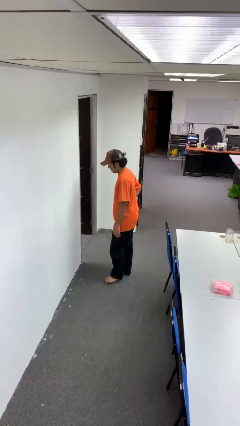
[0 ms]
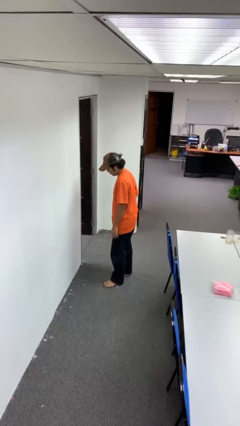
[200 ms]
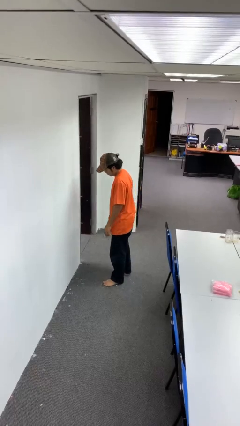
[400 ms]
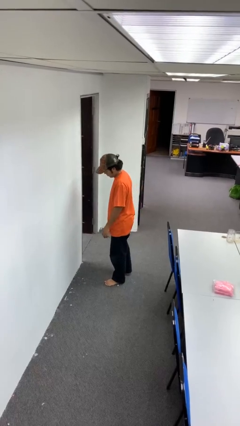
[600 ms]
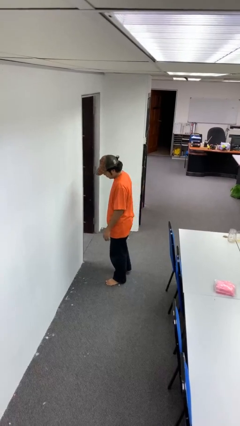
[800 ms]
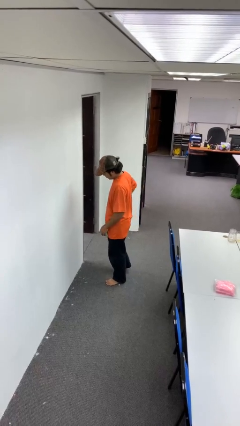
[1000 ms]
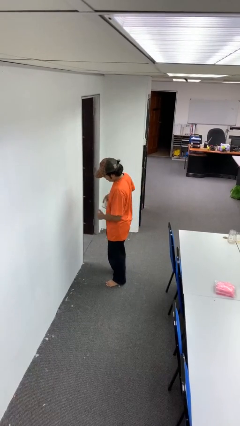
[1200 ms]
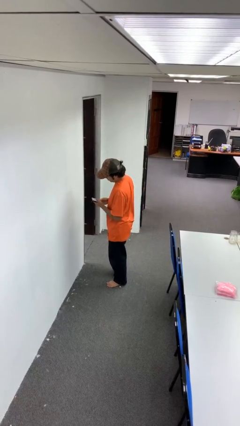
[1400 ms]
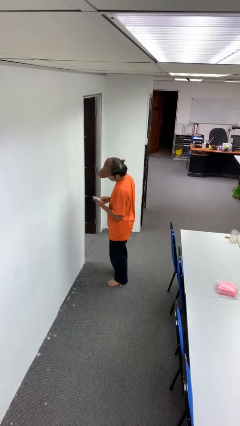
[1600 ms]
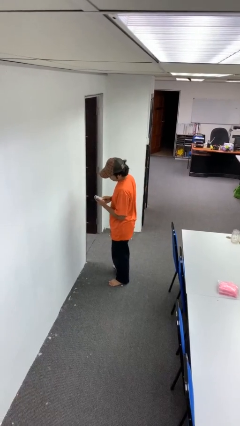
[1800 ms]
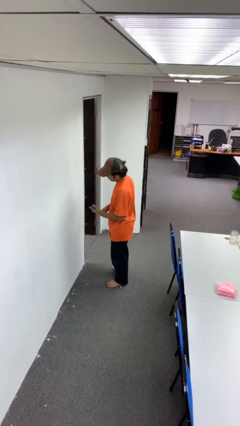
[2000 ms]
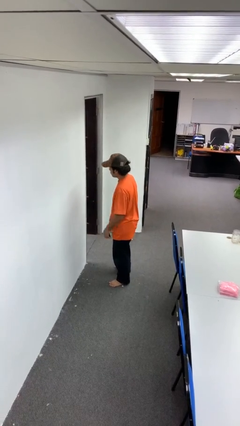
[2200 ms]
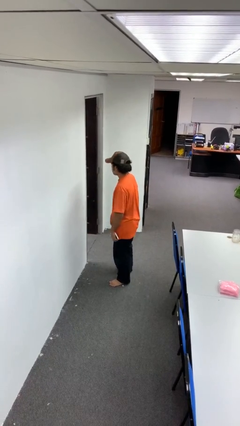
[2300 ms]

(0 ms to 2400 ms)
person takes phone from pocket

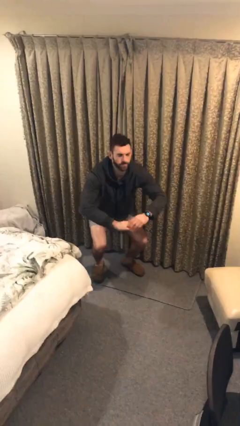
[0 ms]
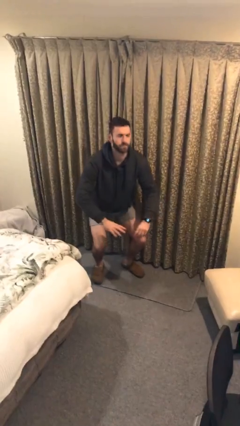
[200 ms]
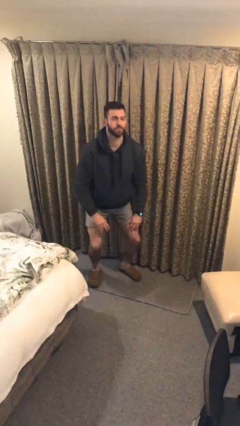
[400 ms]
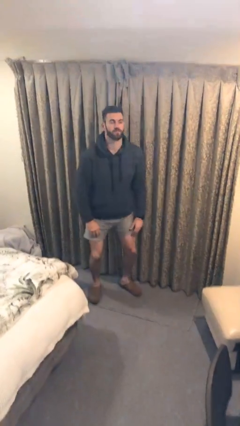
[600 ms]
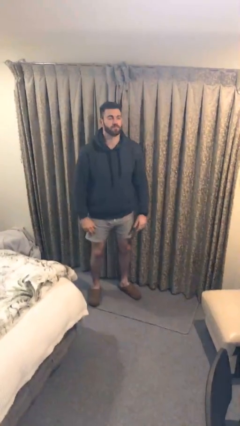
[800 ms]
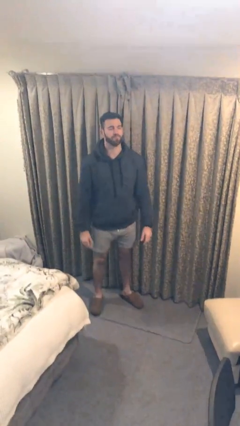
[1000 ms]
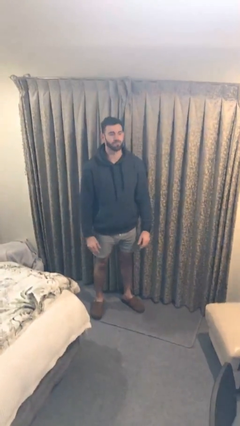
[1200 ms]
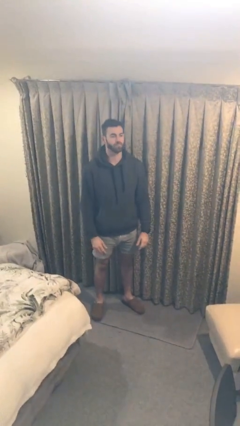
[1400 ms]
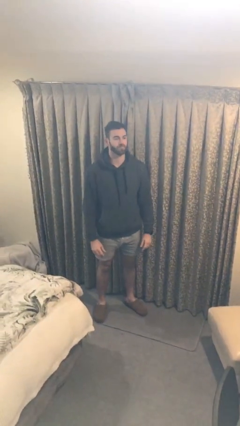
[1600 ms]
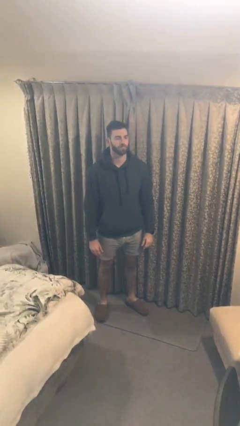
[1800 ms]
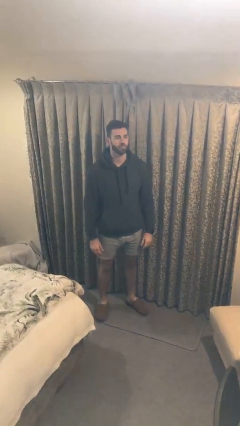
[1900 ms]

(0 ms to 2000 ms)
person stands up

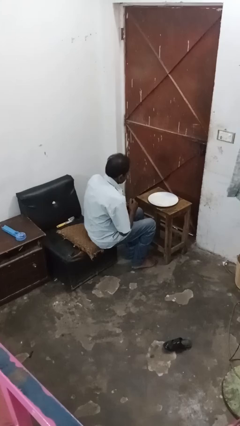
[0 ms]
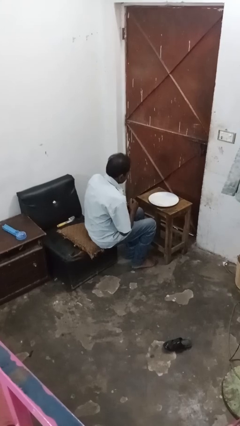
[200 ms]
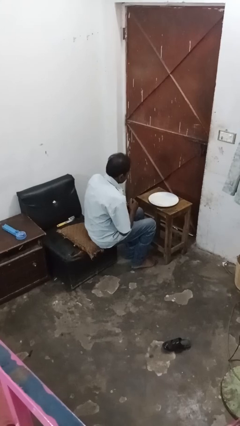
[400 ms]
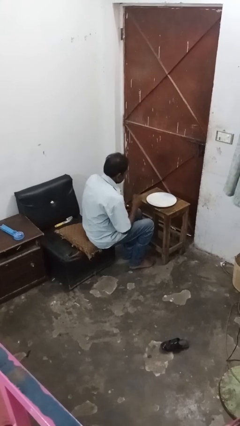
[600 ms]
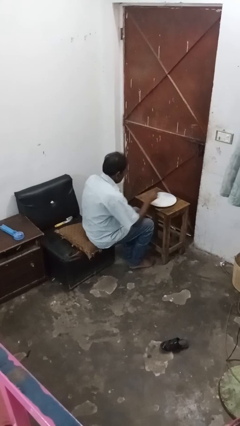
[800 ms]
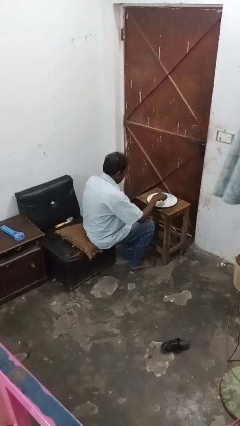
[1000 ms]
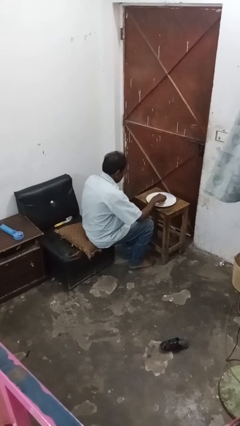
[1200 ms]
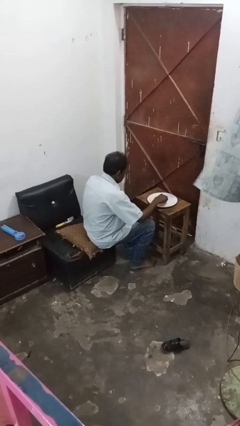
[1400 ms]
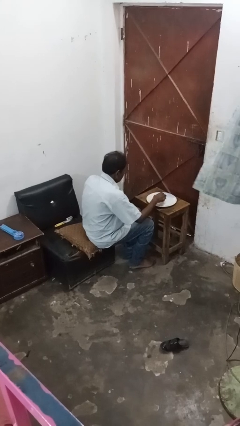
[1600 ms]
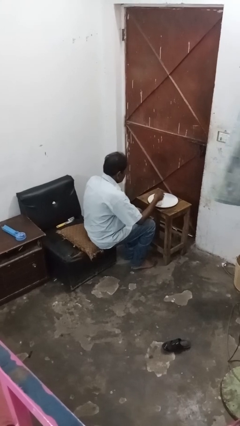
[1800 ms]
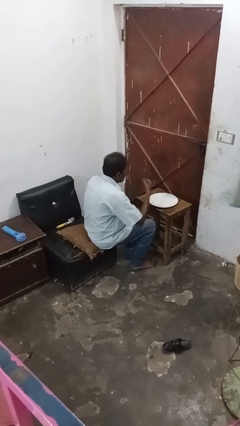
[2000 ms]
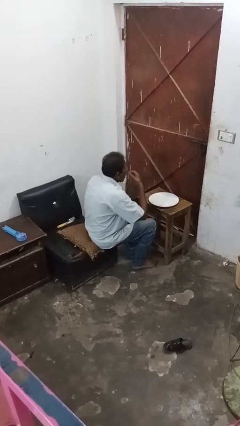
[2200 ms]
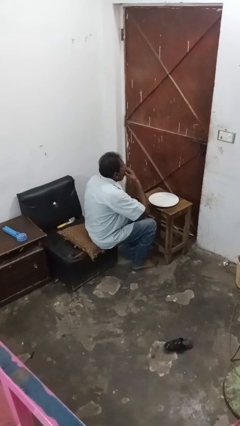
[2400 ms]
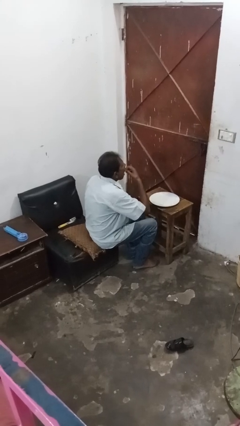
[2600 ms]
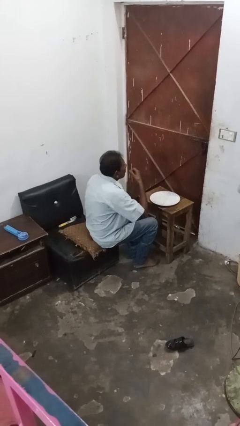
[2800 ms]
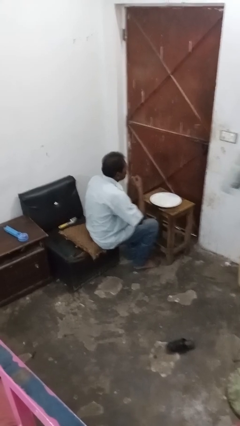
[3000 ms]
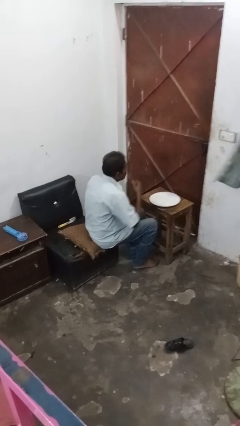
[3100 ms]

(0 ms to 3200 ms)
person eats with hands

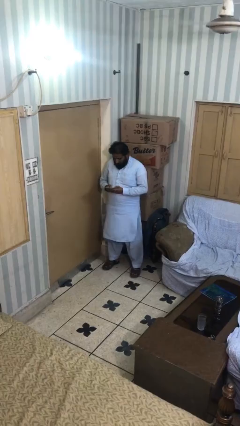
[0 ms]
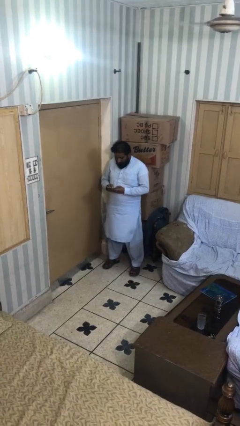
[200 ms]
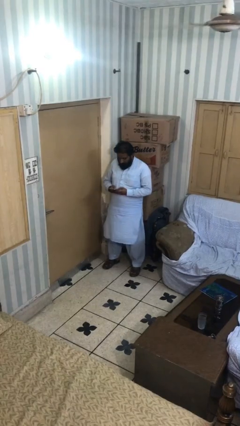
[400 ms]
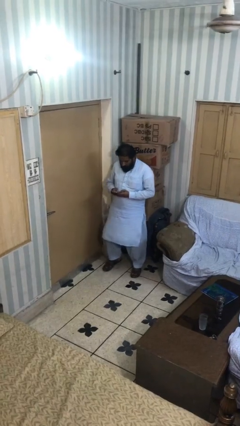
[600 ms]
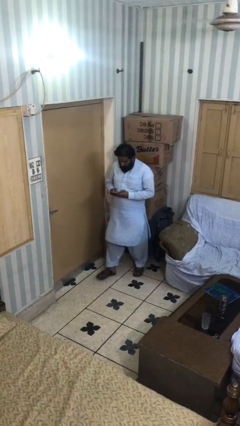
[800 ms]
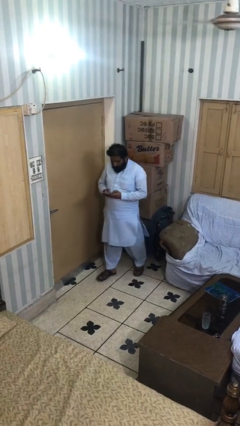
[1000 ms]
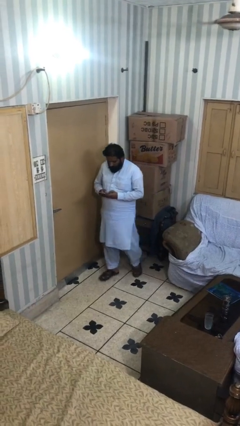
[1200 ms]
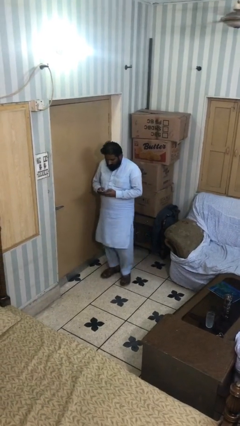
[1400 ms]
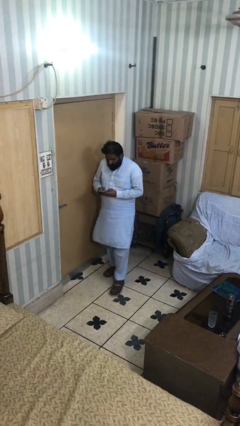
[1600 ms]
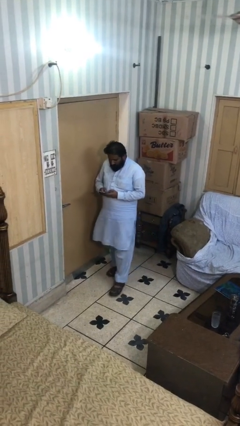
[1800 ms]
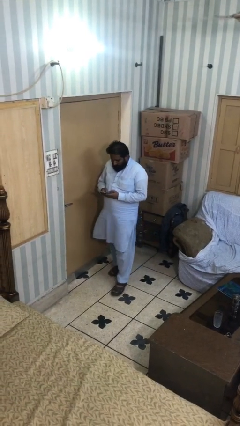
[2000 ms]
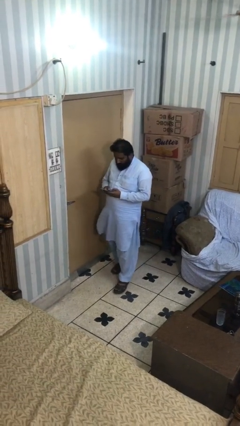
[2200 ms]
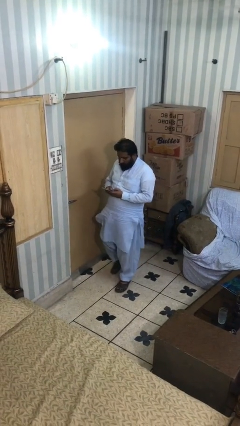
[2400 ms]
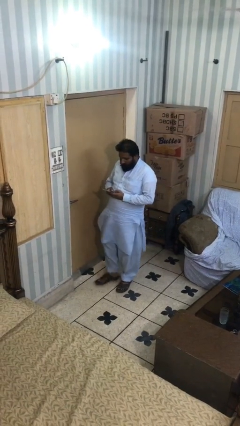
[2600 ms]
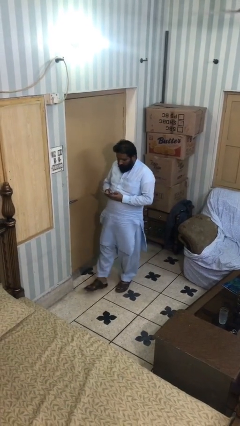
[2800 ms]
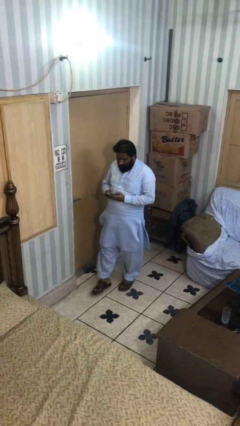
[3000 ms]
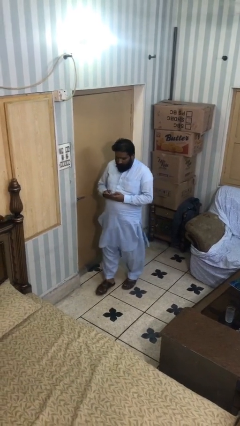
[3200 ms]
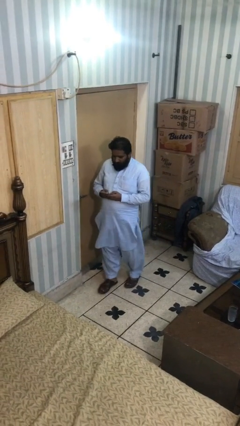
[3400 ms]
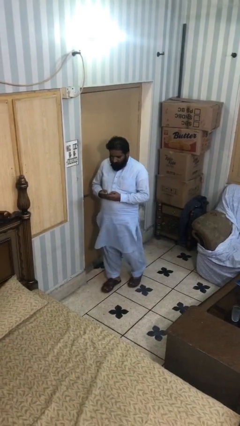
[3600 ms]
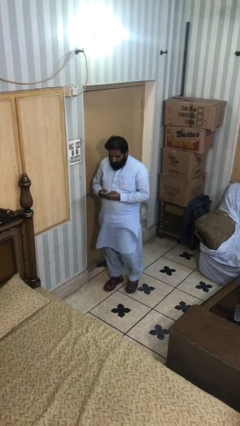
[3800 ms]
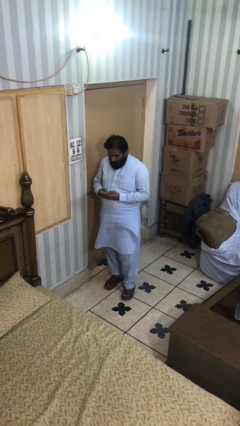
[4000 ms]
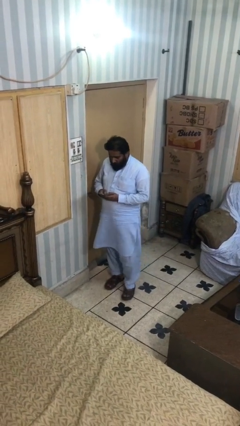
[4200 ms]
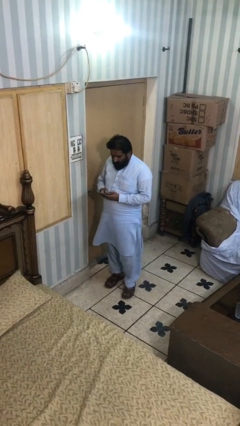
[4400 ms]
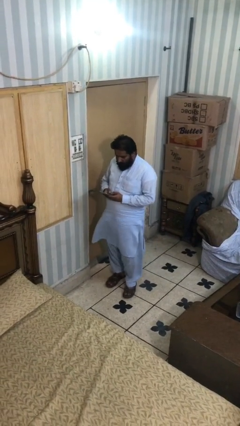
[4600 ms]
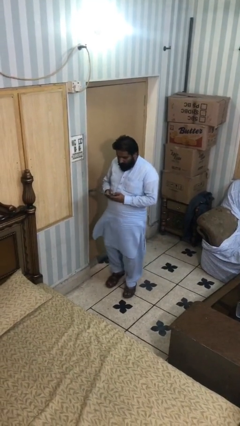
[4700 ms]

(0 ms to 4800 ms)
person texts on phone

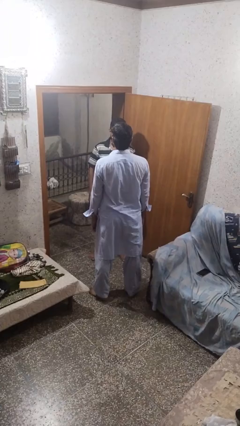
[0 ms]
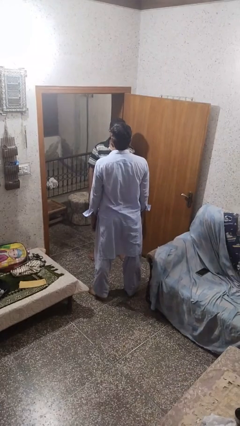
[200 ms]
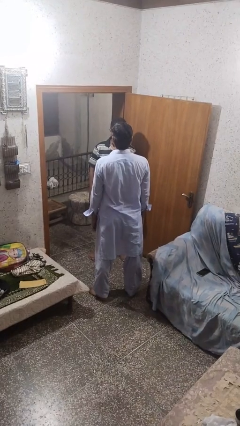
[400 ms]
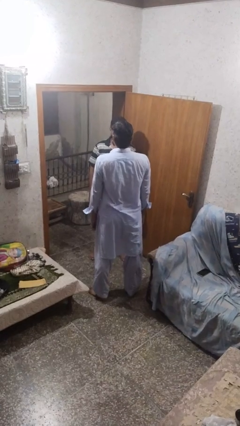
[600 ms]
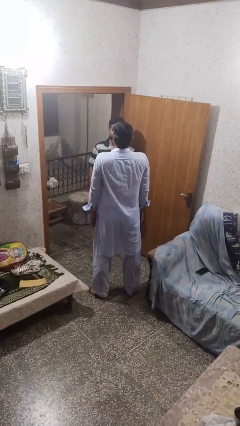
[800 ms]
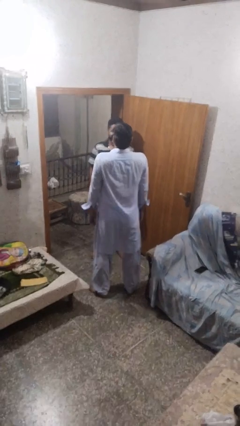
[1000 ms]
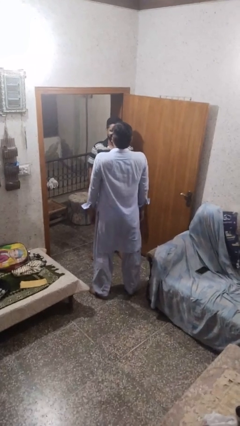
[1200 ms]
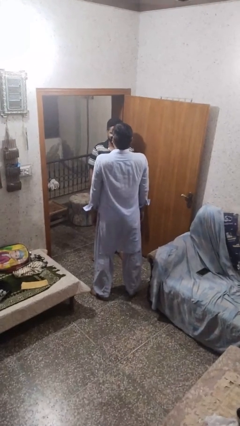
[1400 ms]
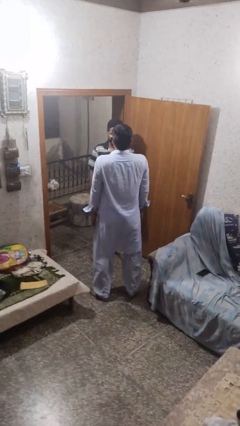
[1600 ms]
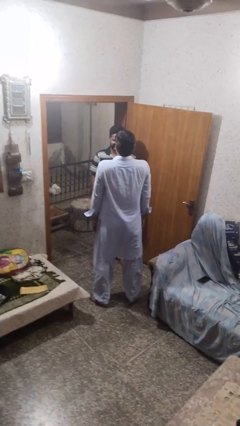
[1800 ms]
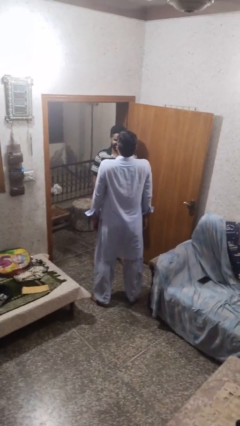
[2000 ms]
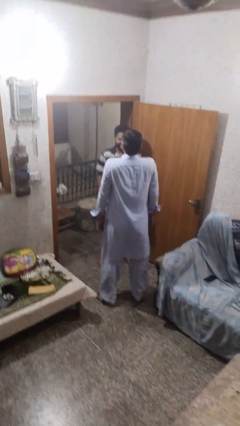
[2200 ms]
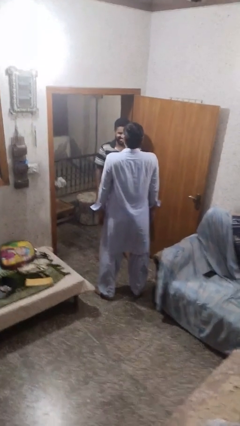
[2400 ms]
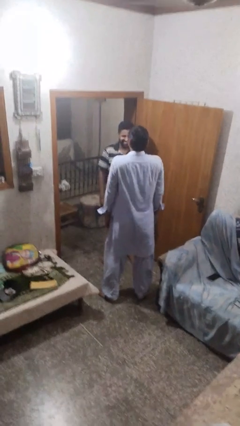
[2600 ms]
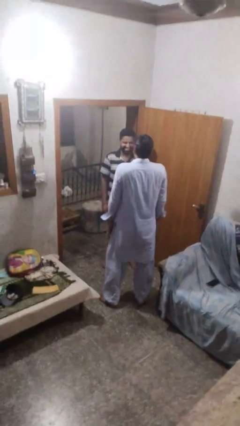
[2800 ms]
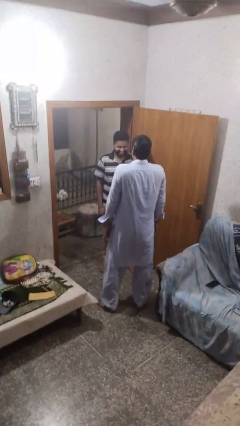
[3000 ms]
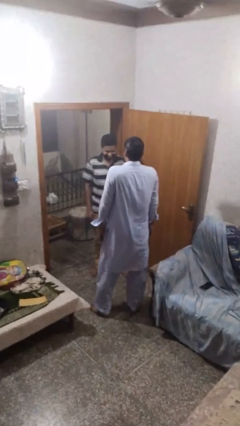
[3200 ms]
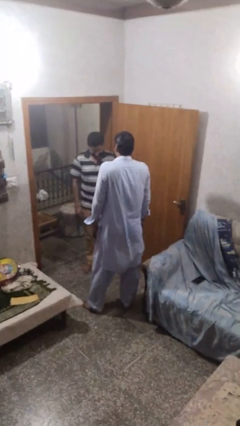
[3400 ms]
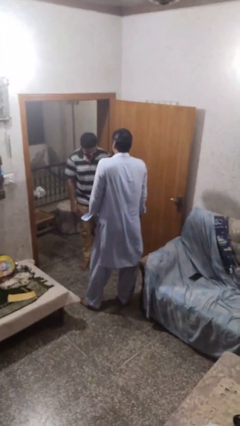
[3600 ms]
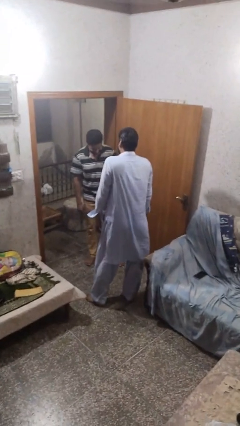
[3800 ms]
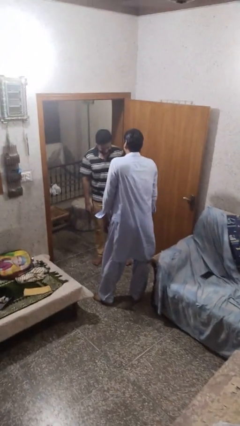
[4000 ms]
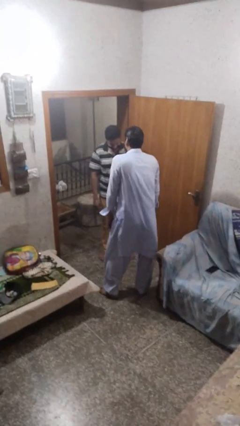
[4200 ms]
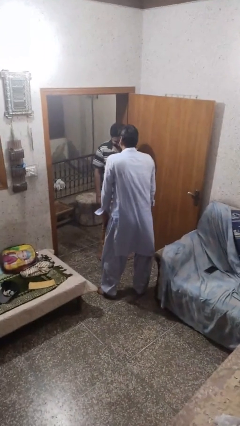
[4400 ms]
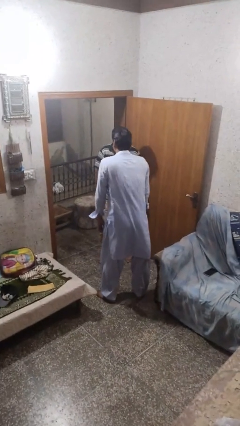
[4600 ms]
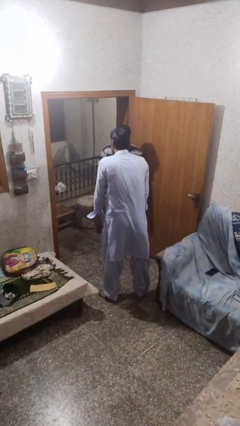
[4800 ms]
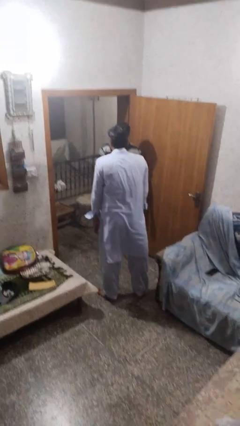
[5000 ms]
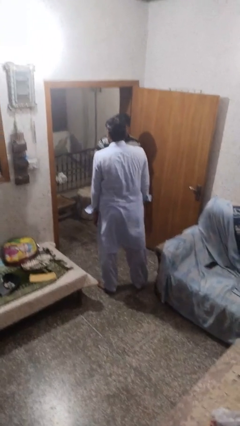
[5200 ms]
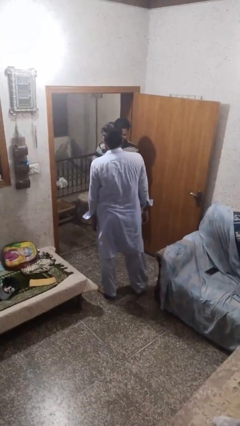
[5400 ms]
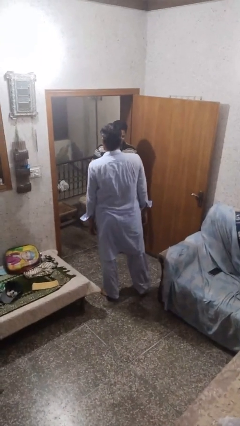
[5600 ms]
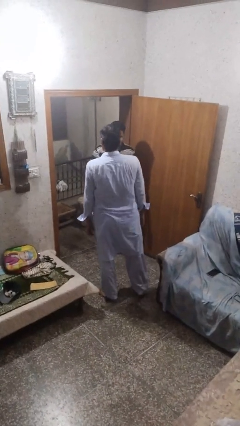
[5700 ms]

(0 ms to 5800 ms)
person laughs with person
